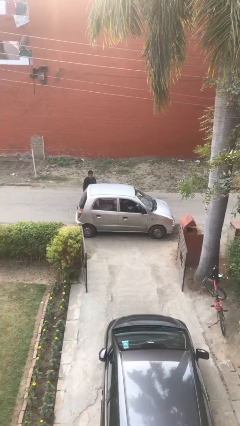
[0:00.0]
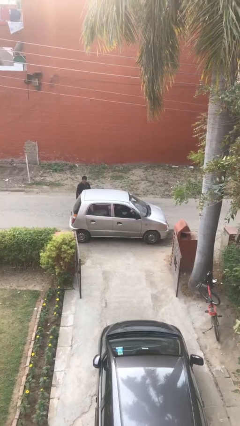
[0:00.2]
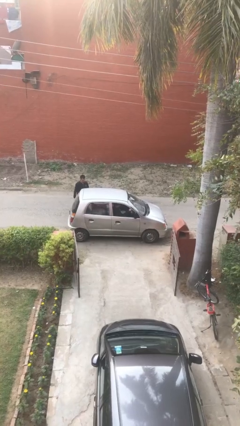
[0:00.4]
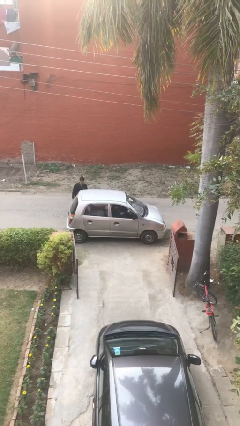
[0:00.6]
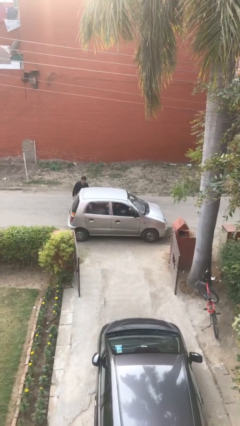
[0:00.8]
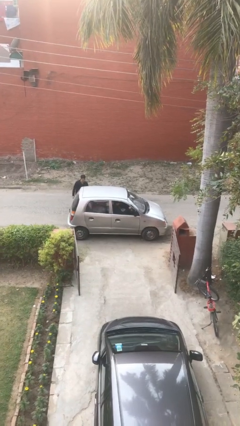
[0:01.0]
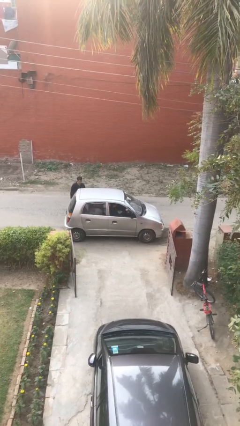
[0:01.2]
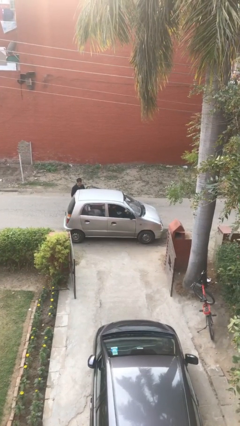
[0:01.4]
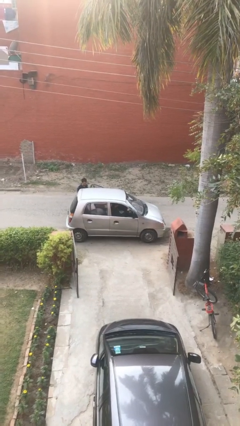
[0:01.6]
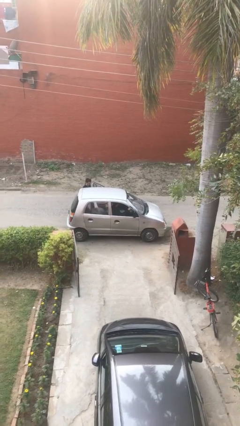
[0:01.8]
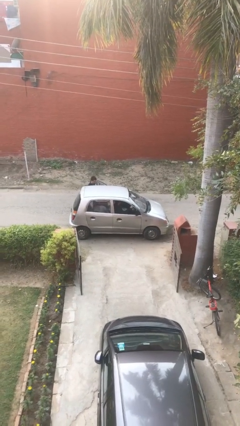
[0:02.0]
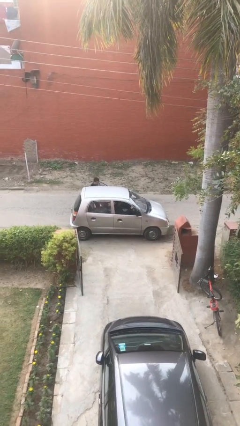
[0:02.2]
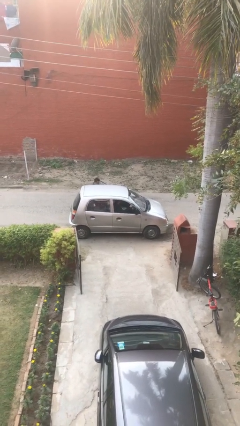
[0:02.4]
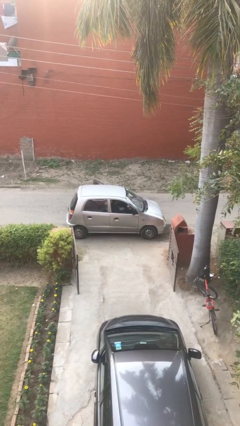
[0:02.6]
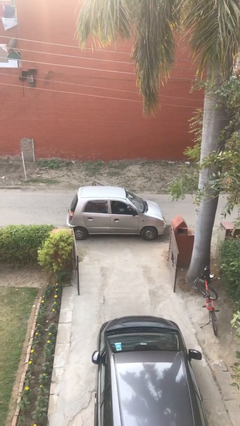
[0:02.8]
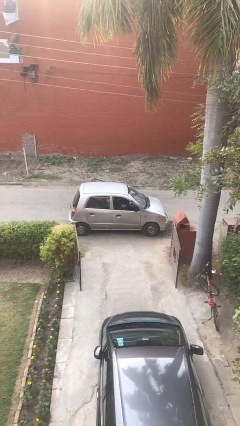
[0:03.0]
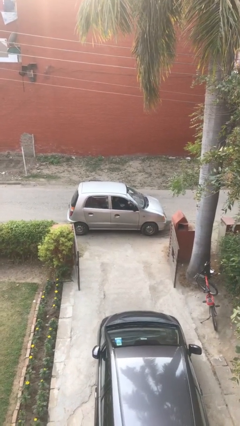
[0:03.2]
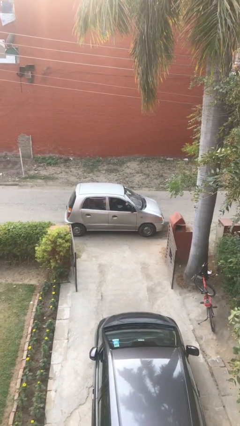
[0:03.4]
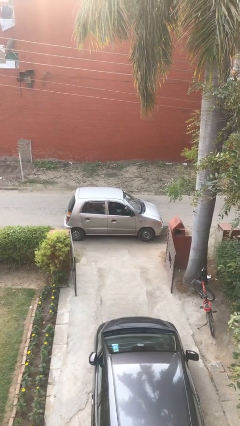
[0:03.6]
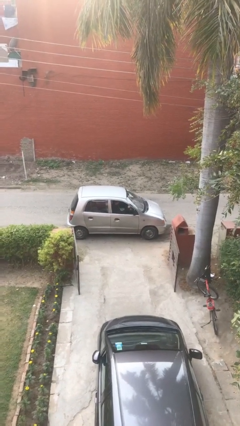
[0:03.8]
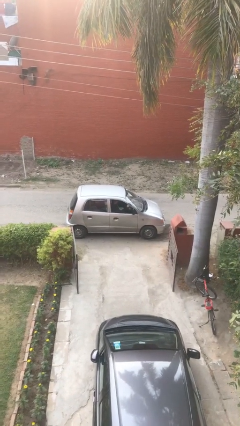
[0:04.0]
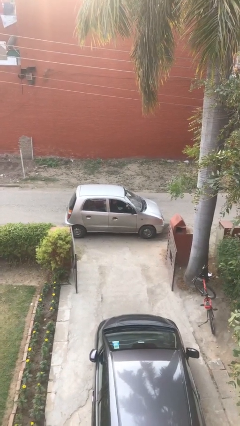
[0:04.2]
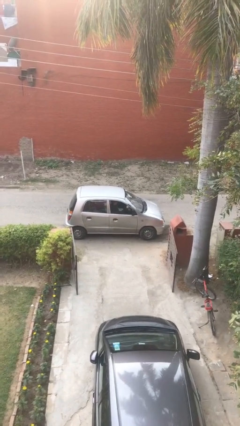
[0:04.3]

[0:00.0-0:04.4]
car picks up person

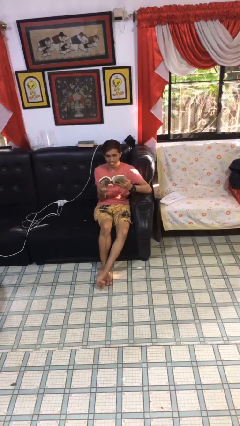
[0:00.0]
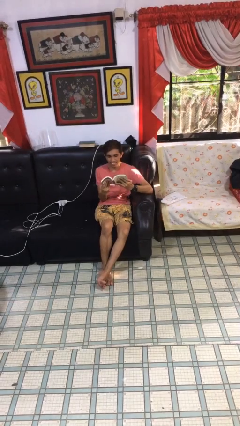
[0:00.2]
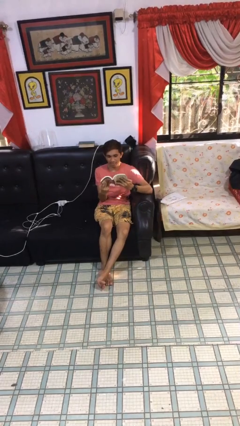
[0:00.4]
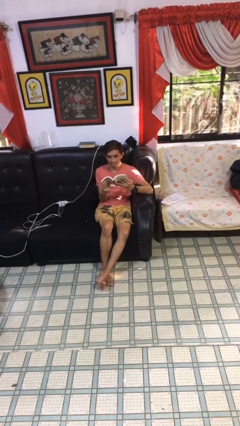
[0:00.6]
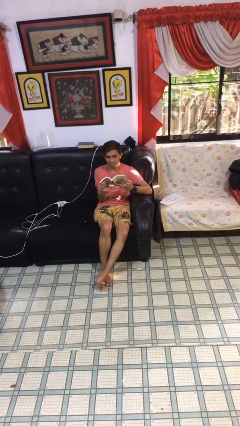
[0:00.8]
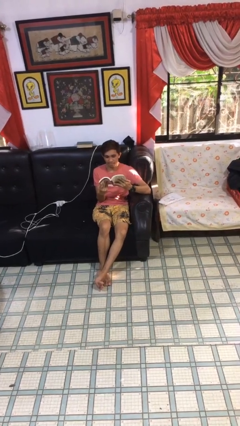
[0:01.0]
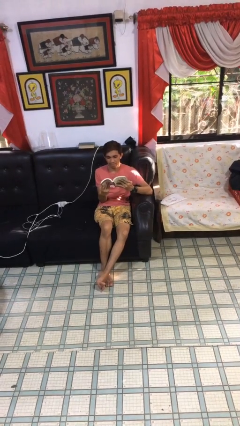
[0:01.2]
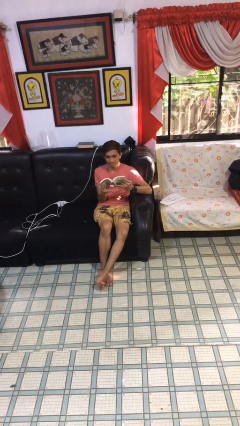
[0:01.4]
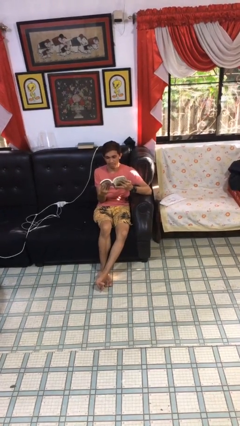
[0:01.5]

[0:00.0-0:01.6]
person reads document

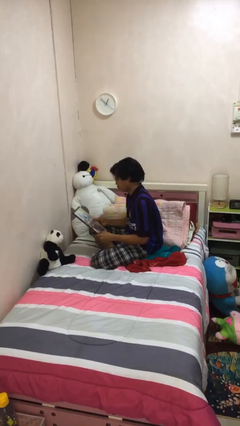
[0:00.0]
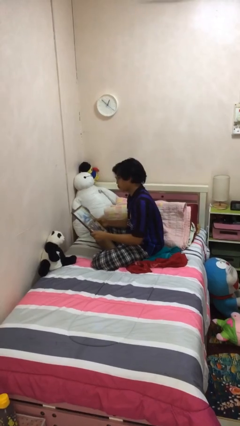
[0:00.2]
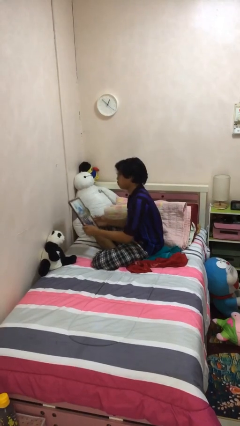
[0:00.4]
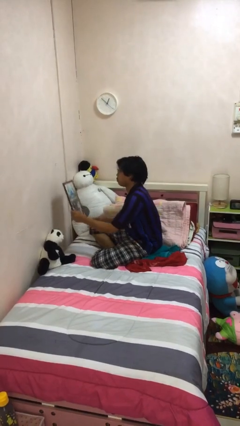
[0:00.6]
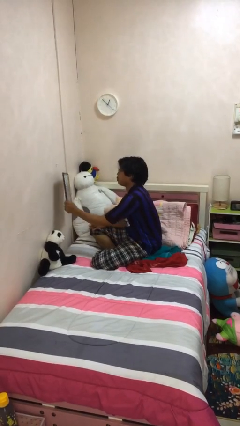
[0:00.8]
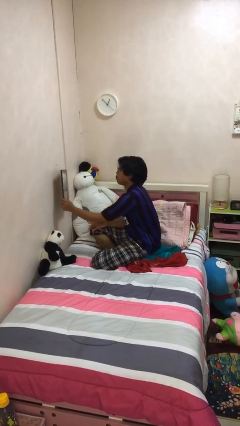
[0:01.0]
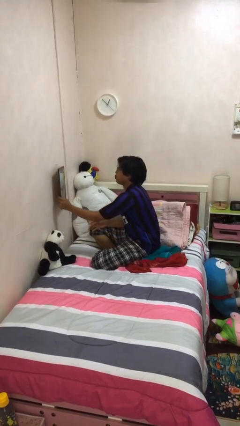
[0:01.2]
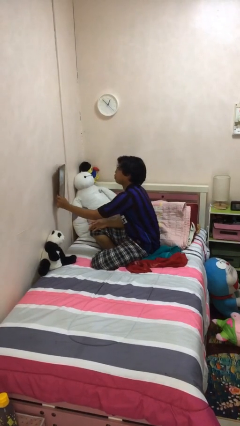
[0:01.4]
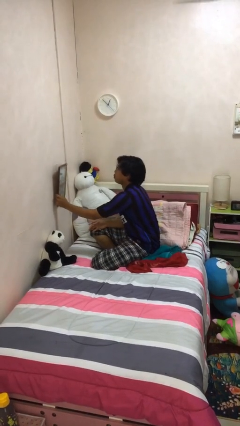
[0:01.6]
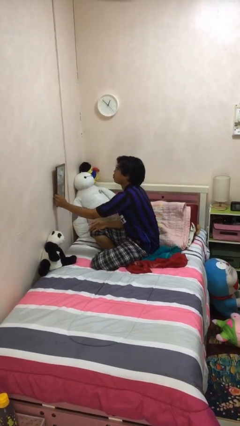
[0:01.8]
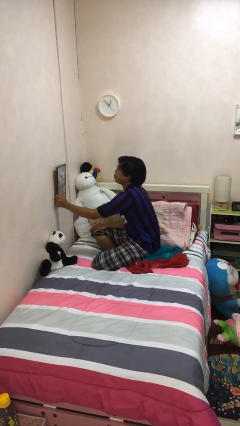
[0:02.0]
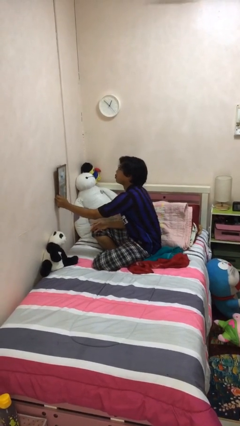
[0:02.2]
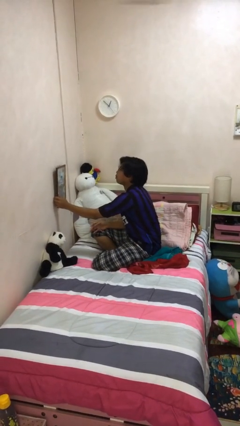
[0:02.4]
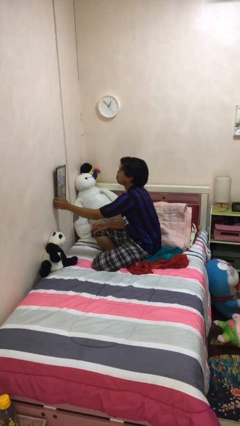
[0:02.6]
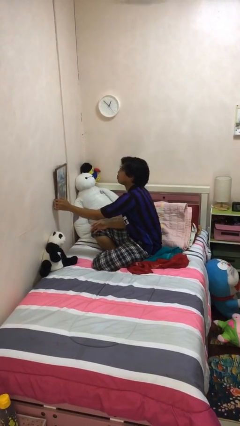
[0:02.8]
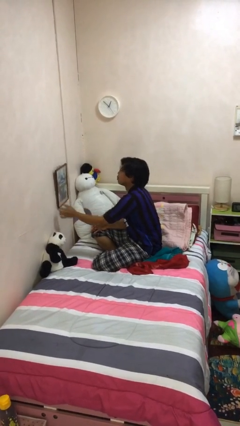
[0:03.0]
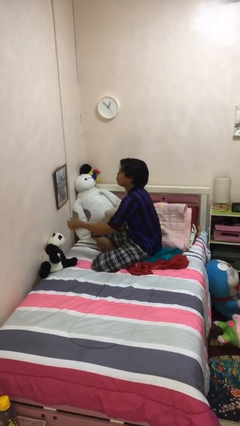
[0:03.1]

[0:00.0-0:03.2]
person puts up picture frame

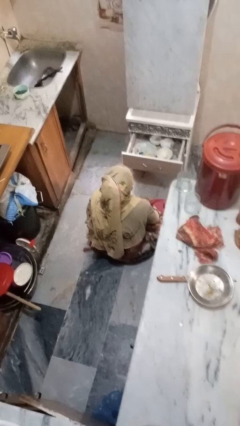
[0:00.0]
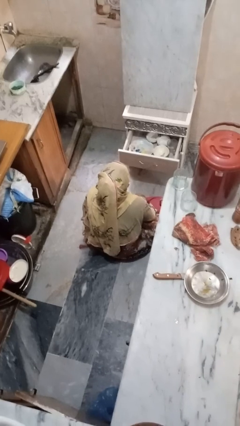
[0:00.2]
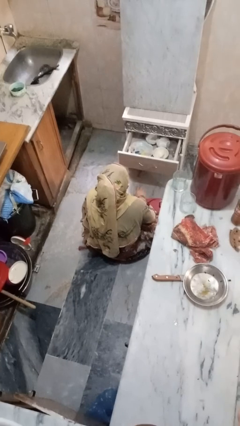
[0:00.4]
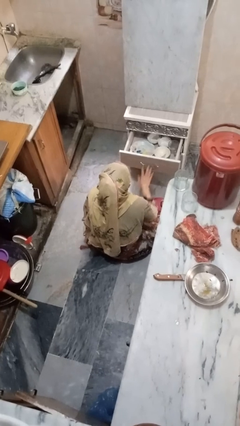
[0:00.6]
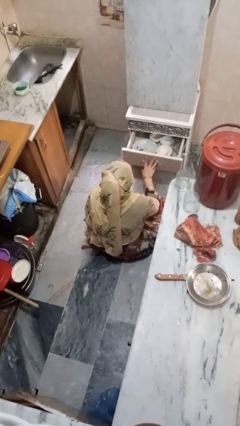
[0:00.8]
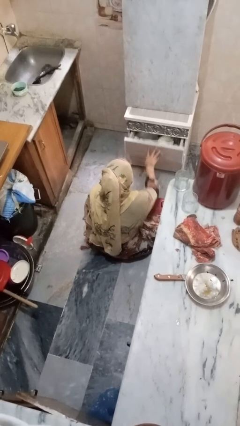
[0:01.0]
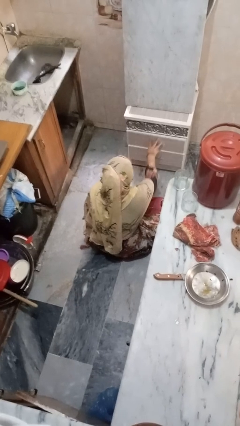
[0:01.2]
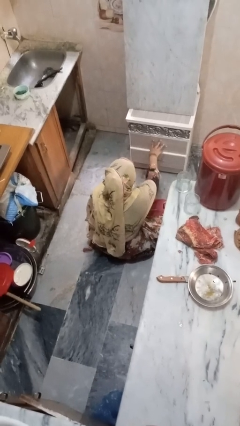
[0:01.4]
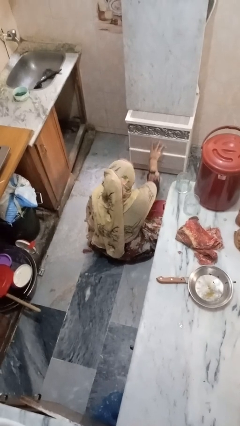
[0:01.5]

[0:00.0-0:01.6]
person closes kitchen drawer

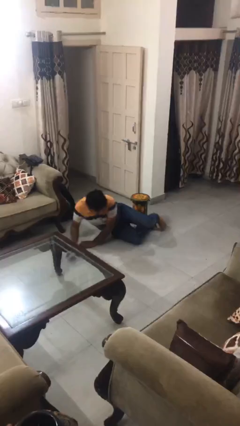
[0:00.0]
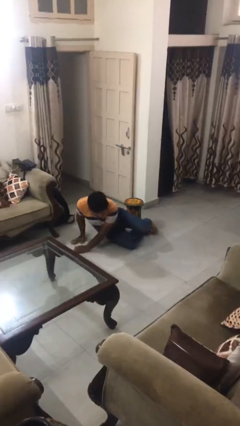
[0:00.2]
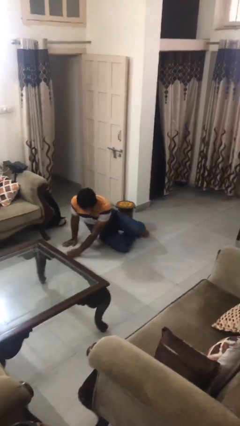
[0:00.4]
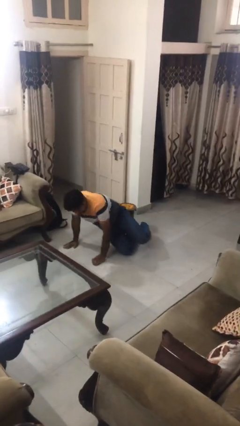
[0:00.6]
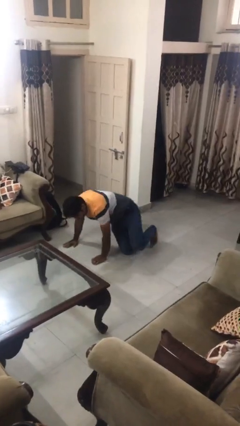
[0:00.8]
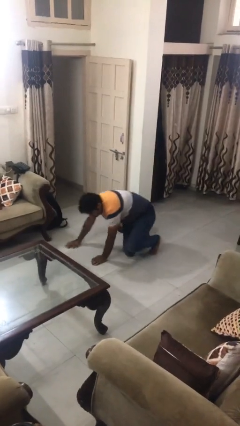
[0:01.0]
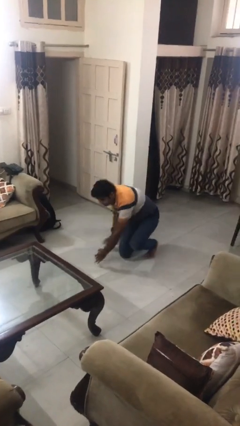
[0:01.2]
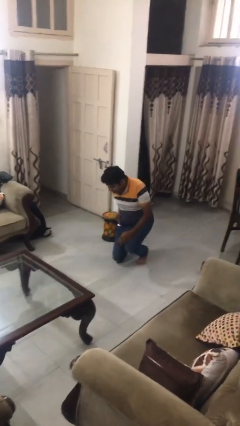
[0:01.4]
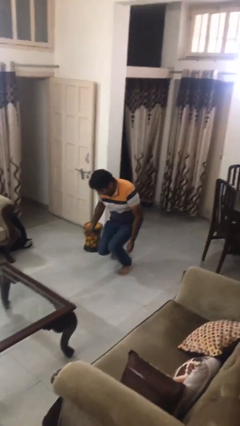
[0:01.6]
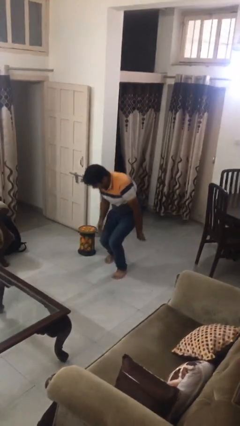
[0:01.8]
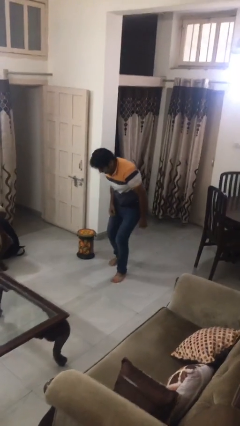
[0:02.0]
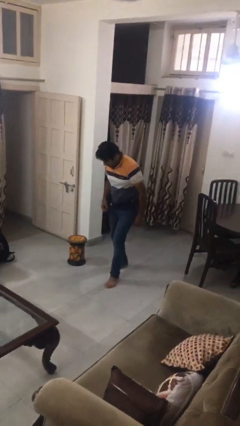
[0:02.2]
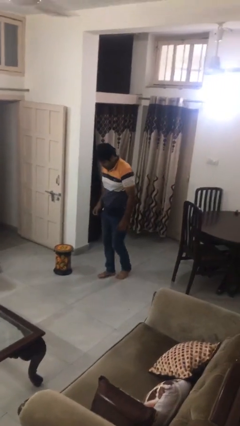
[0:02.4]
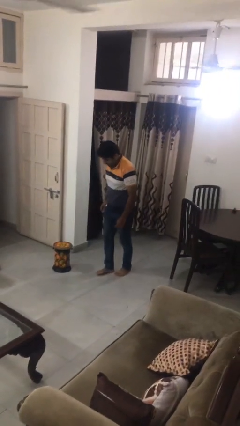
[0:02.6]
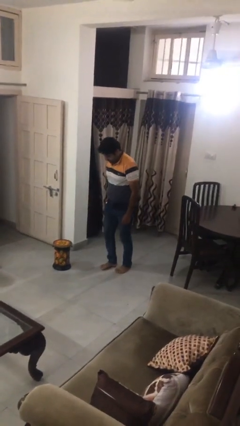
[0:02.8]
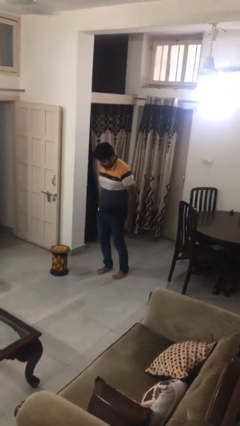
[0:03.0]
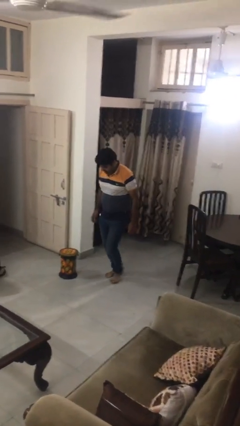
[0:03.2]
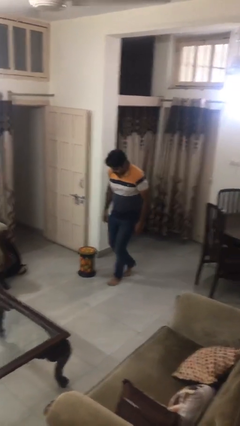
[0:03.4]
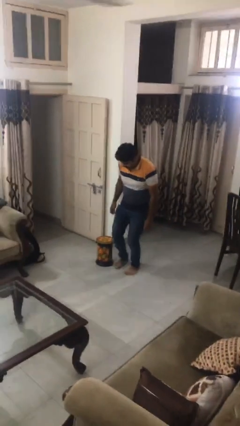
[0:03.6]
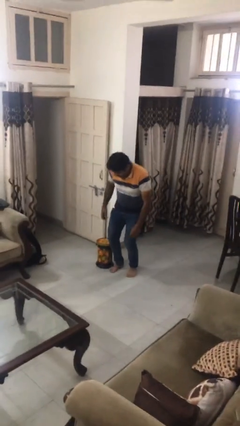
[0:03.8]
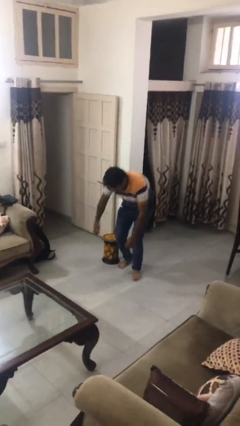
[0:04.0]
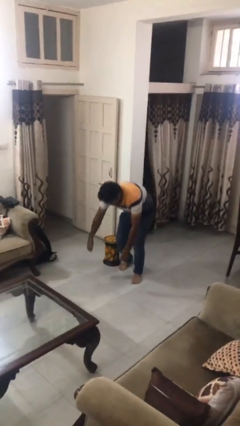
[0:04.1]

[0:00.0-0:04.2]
person stands up from floor

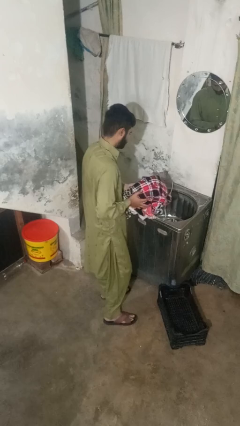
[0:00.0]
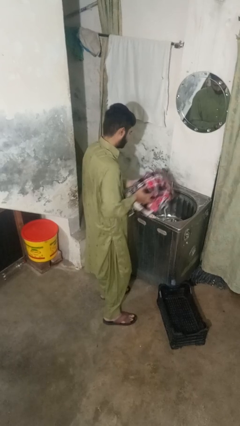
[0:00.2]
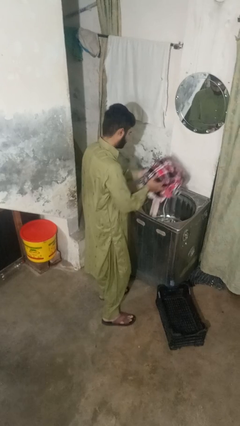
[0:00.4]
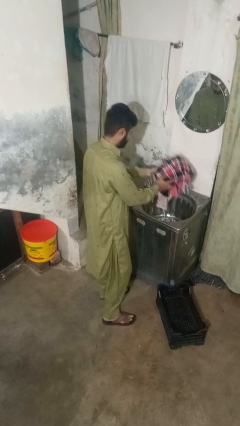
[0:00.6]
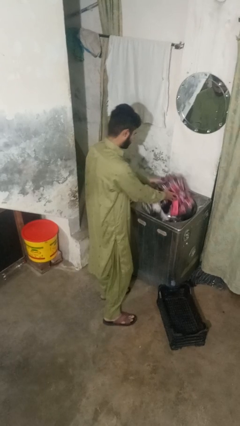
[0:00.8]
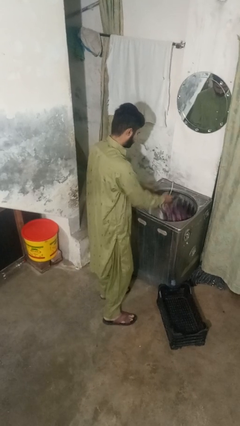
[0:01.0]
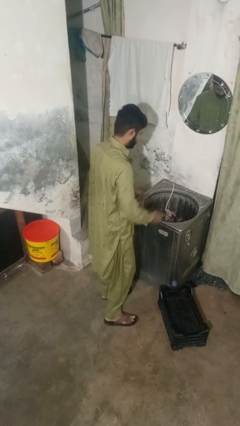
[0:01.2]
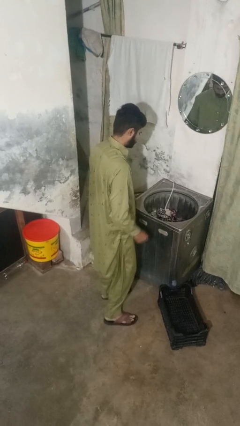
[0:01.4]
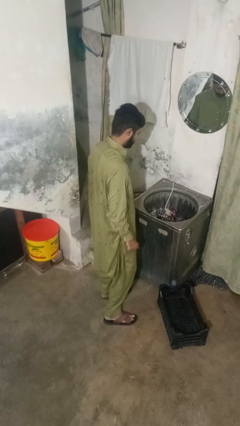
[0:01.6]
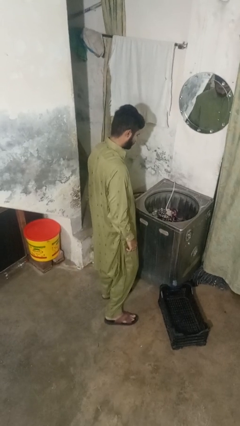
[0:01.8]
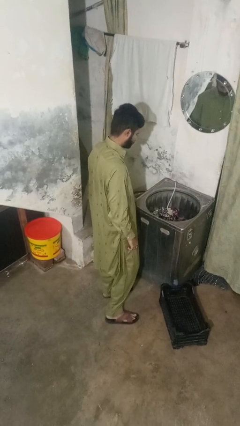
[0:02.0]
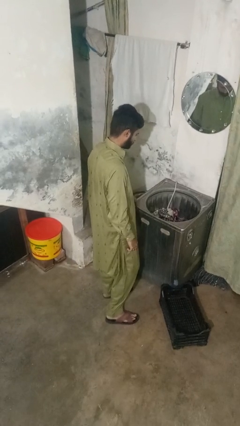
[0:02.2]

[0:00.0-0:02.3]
person loads clotheswasher
